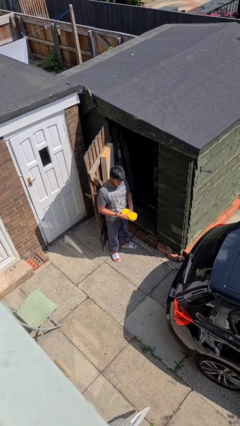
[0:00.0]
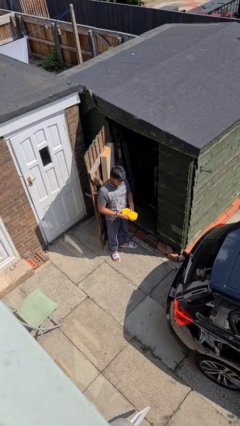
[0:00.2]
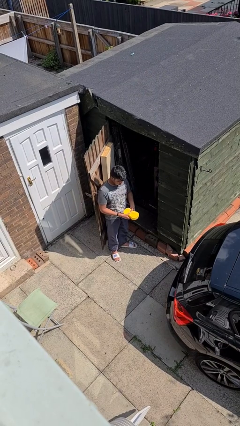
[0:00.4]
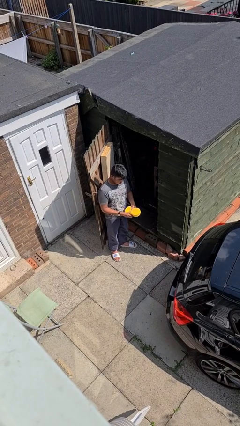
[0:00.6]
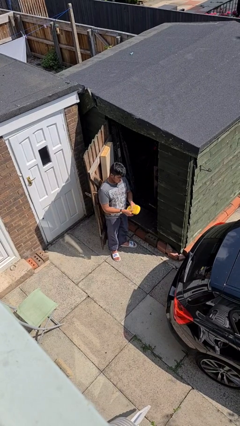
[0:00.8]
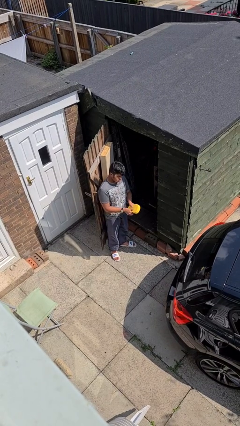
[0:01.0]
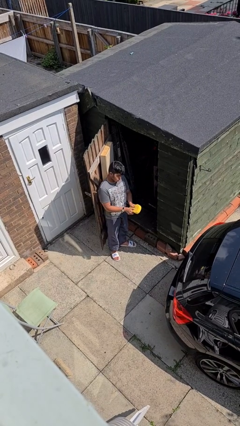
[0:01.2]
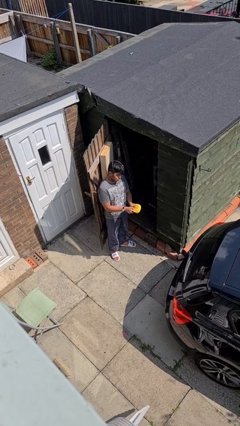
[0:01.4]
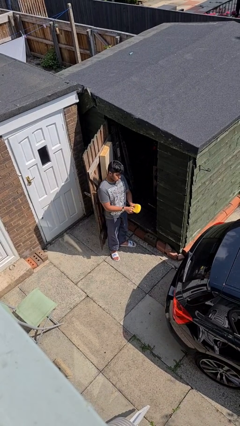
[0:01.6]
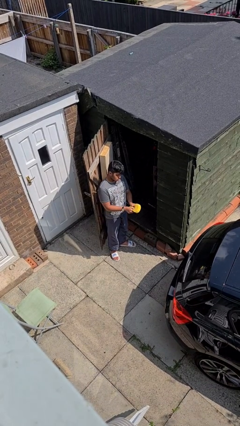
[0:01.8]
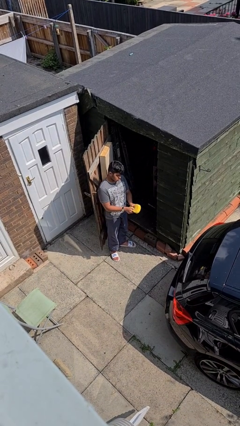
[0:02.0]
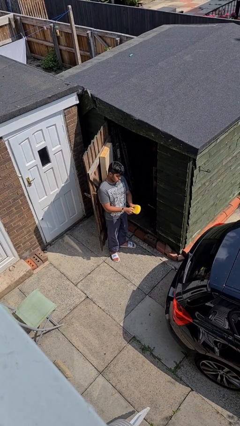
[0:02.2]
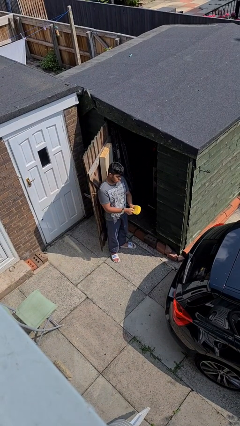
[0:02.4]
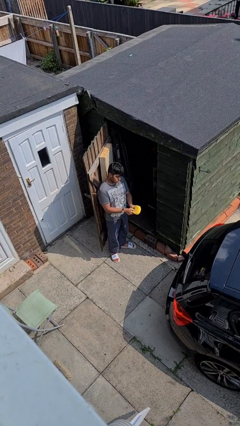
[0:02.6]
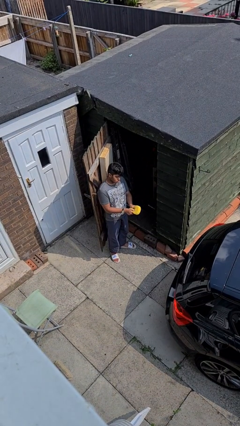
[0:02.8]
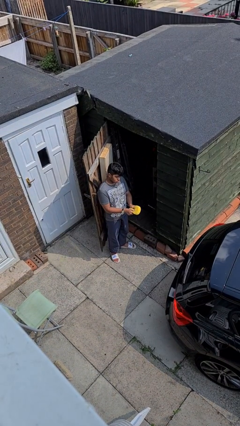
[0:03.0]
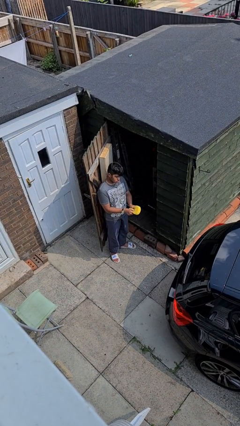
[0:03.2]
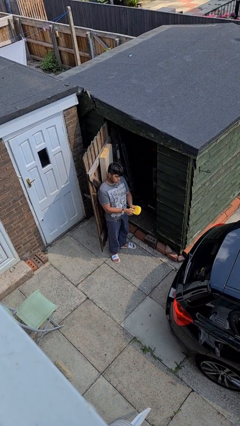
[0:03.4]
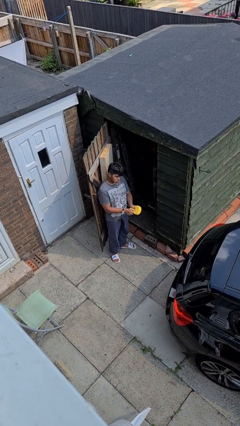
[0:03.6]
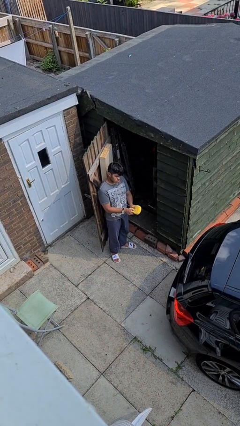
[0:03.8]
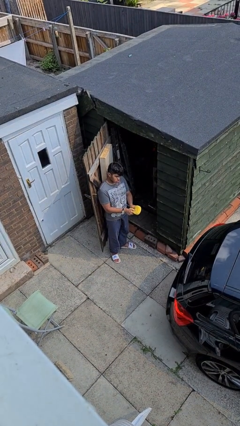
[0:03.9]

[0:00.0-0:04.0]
person squeezes object

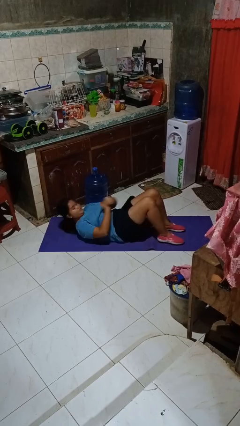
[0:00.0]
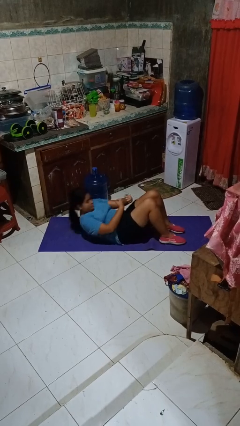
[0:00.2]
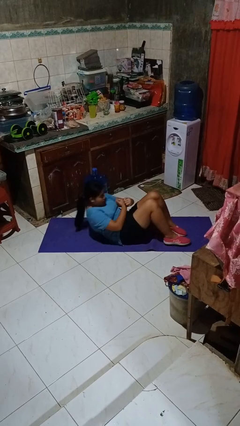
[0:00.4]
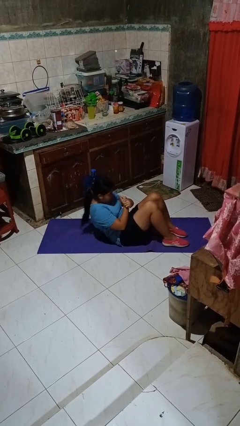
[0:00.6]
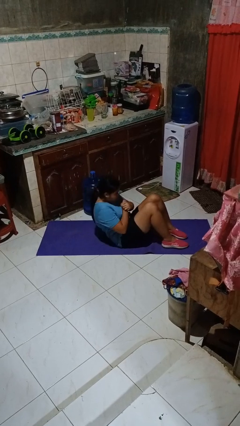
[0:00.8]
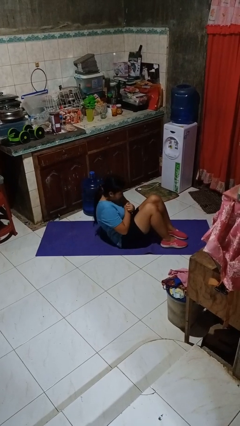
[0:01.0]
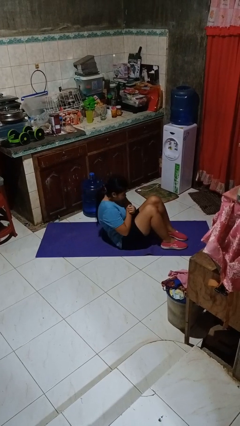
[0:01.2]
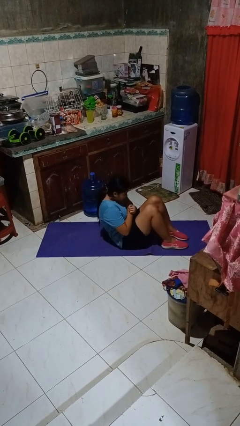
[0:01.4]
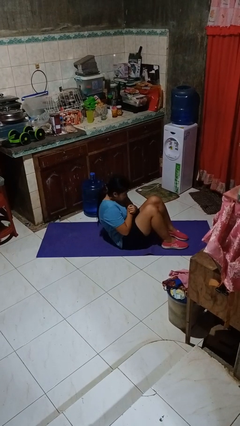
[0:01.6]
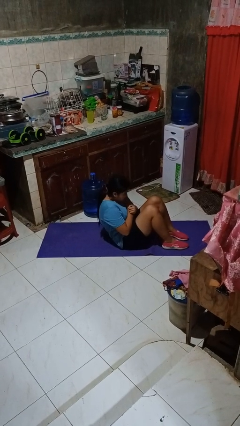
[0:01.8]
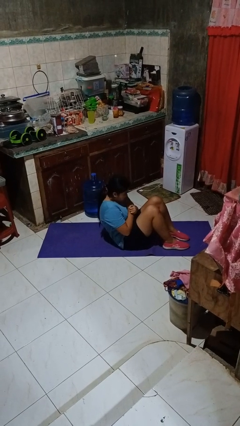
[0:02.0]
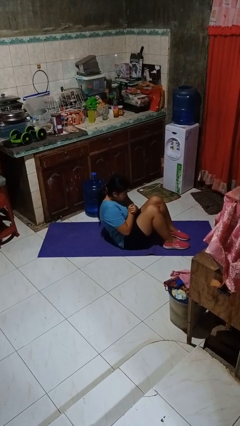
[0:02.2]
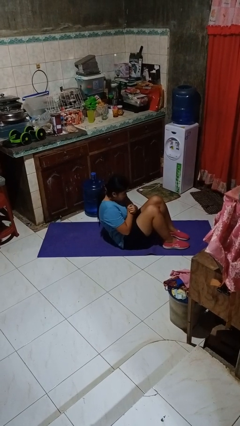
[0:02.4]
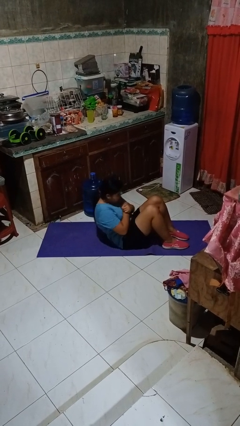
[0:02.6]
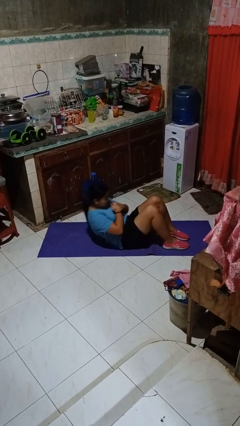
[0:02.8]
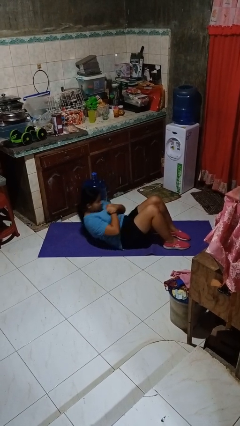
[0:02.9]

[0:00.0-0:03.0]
person exercises with situp

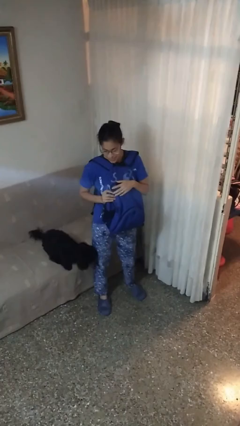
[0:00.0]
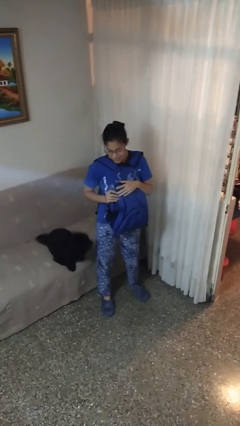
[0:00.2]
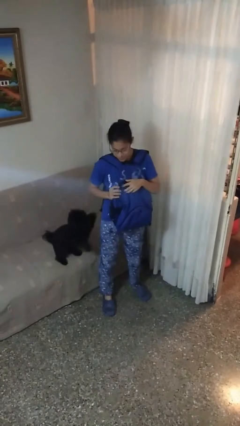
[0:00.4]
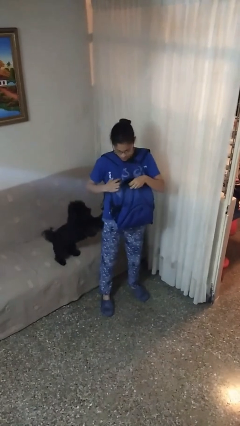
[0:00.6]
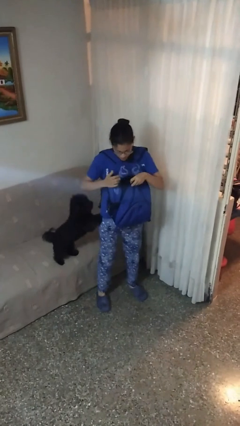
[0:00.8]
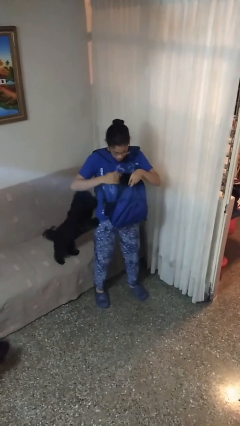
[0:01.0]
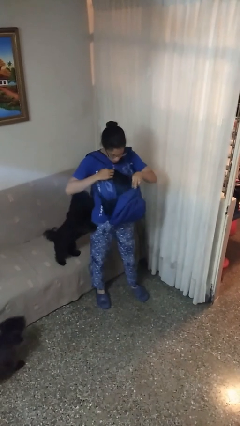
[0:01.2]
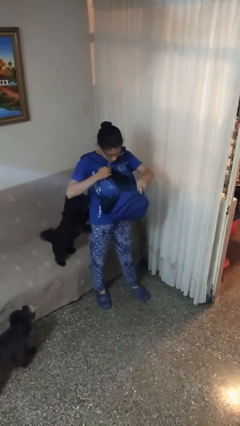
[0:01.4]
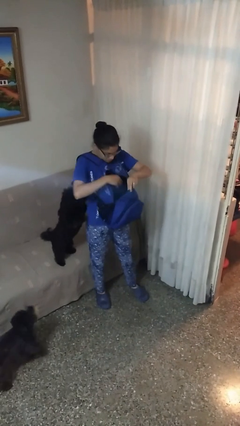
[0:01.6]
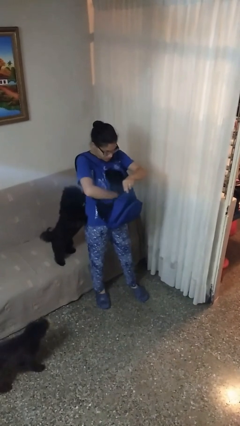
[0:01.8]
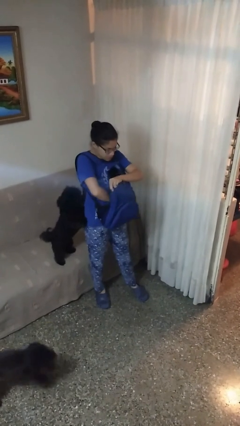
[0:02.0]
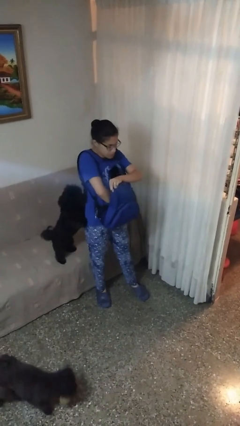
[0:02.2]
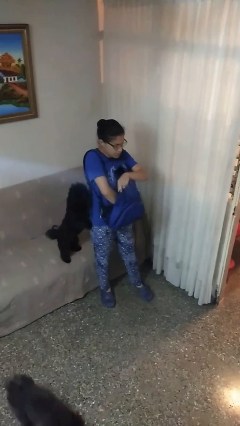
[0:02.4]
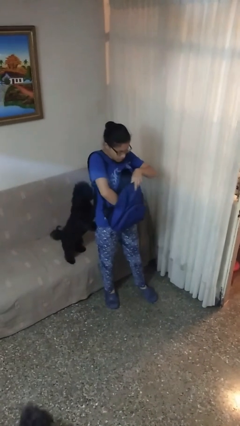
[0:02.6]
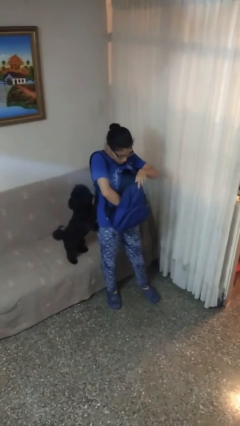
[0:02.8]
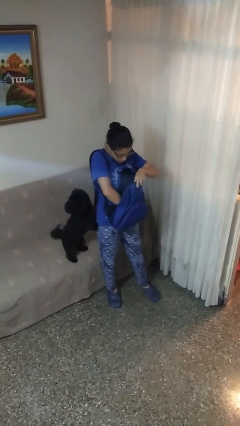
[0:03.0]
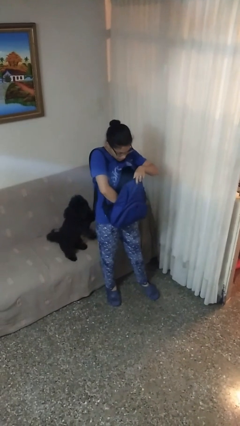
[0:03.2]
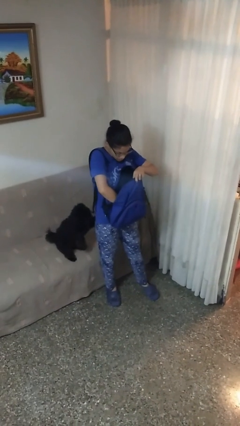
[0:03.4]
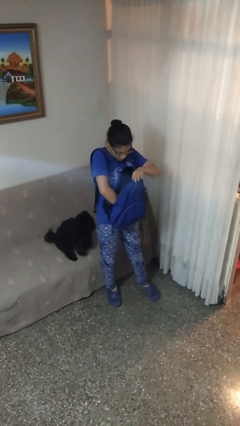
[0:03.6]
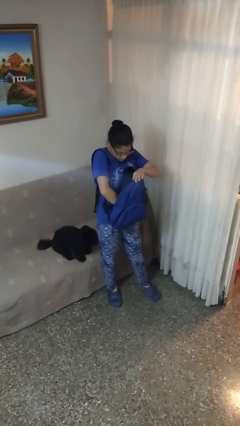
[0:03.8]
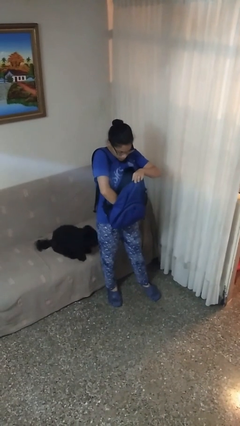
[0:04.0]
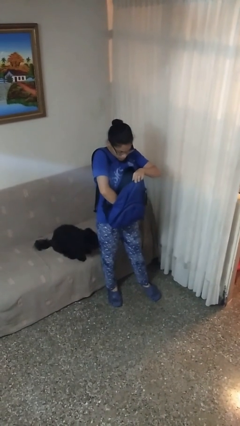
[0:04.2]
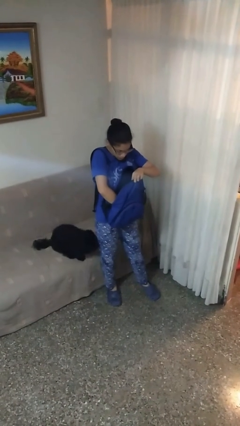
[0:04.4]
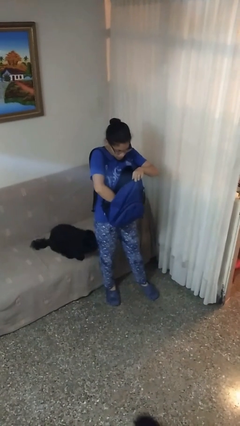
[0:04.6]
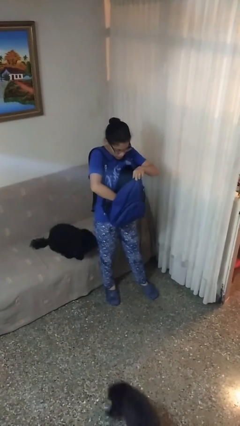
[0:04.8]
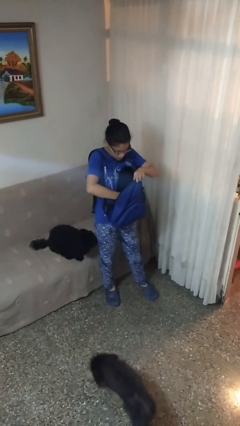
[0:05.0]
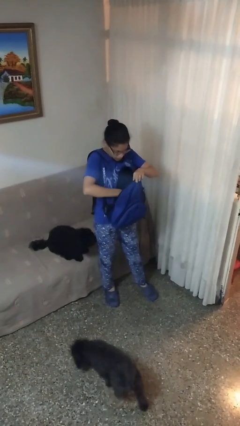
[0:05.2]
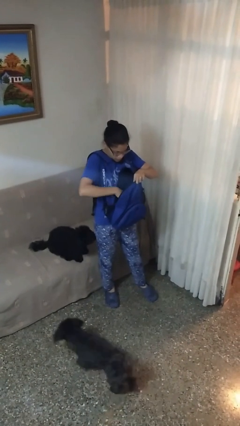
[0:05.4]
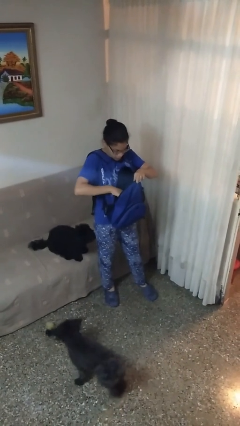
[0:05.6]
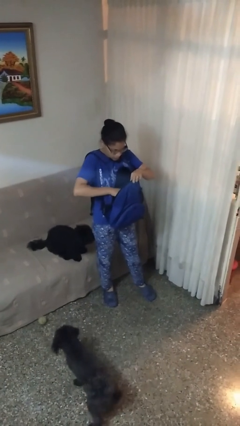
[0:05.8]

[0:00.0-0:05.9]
person searches in backpack

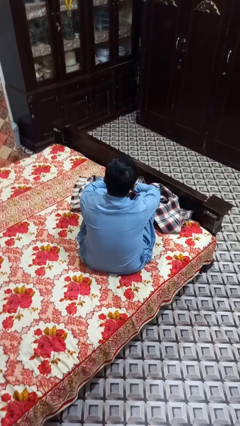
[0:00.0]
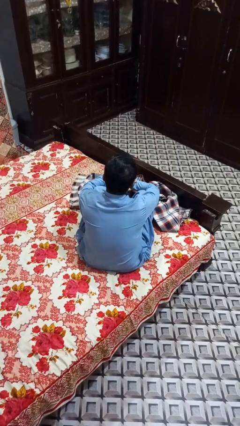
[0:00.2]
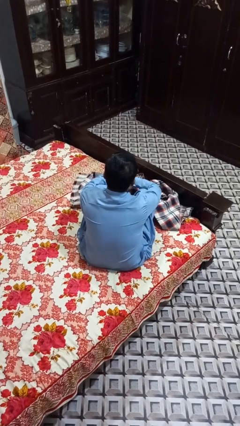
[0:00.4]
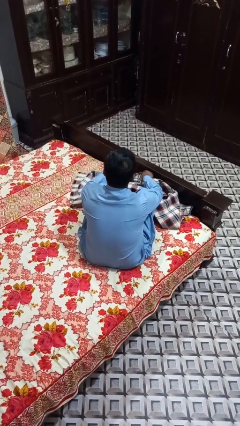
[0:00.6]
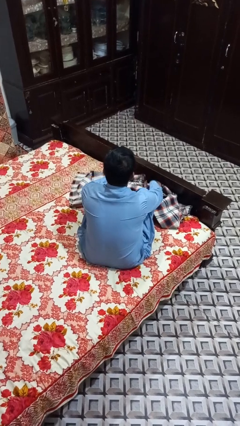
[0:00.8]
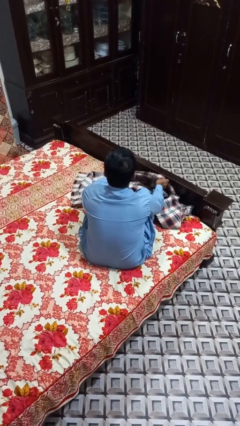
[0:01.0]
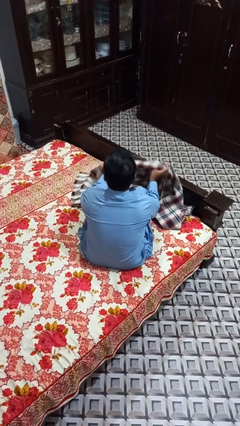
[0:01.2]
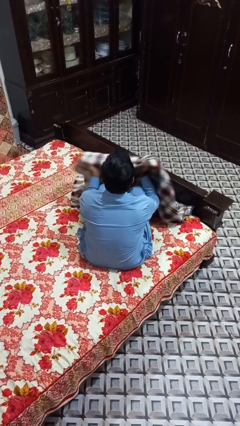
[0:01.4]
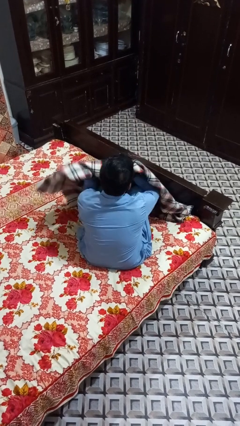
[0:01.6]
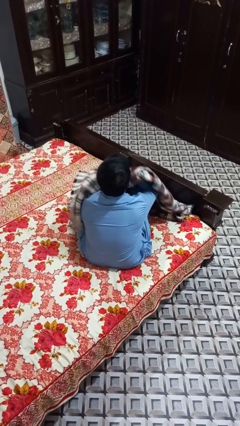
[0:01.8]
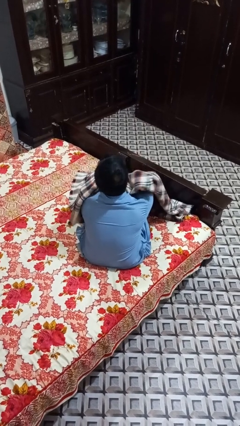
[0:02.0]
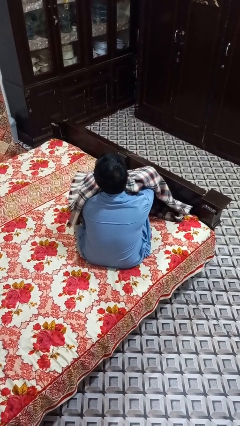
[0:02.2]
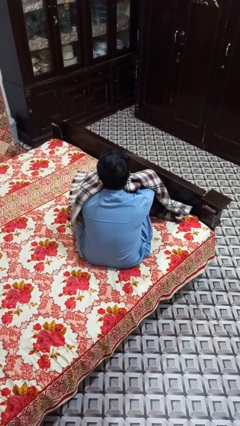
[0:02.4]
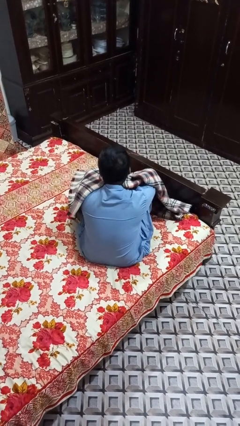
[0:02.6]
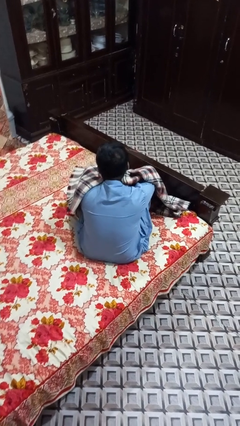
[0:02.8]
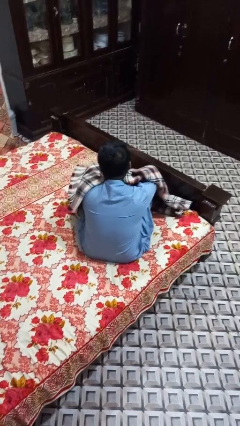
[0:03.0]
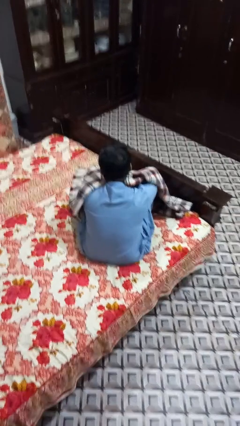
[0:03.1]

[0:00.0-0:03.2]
person covers with blanket

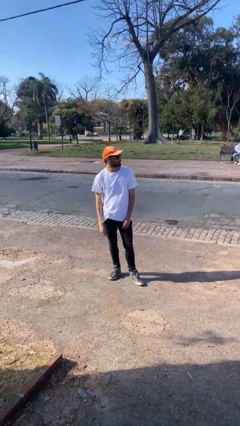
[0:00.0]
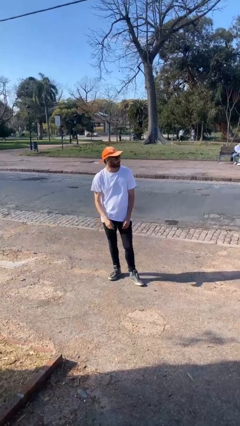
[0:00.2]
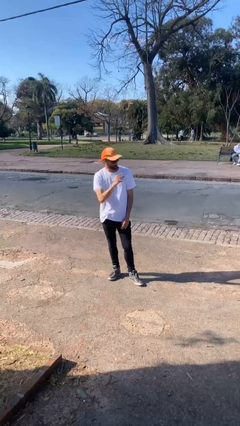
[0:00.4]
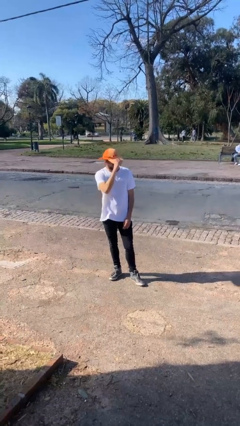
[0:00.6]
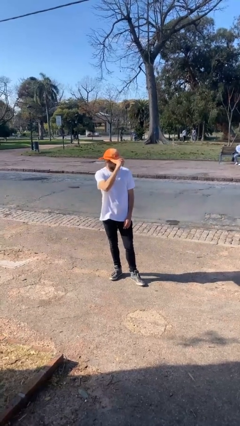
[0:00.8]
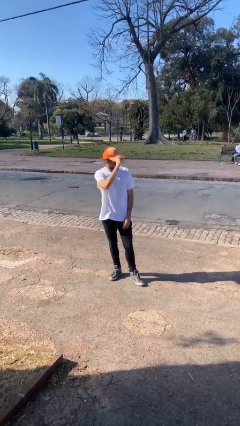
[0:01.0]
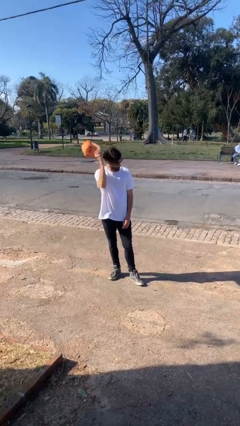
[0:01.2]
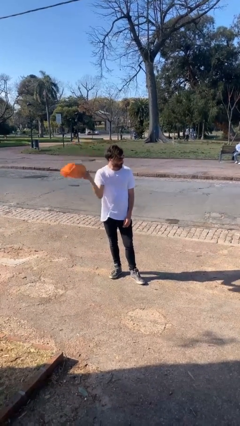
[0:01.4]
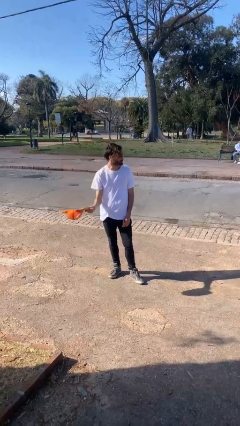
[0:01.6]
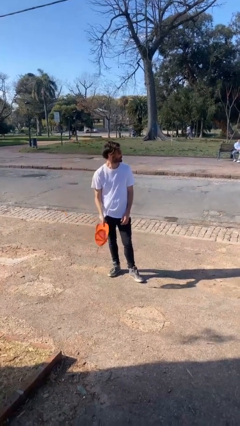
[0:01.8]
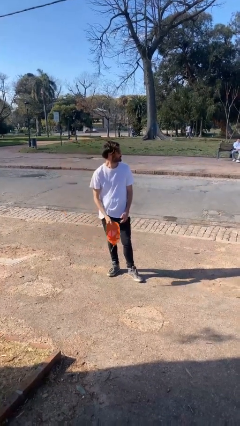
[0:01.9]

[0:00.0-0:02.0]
person takes off hat
